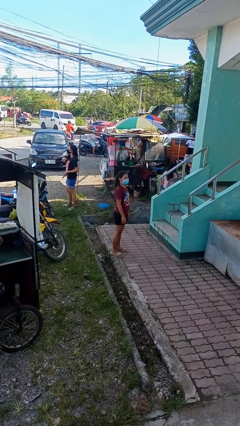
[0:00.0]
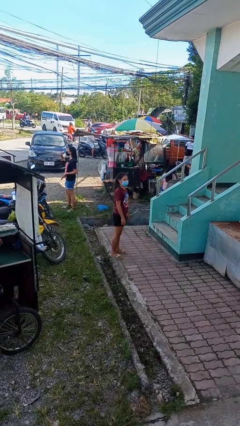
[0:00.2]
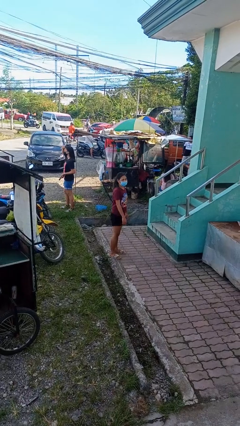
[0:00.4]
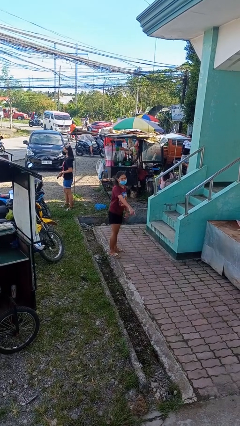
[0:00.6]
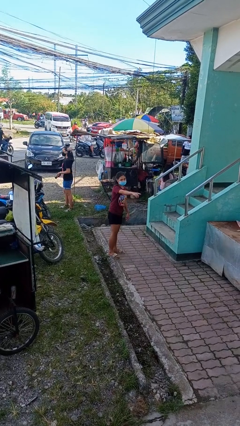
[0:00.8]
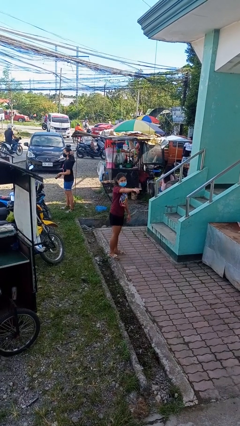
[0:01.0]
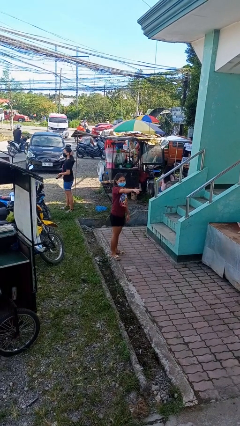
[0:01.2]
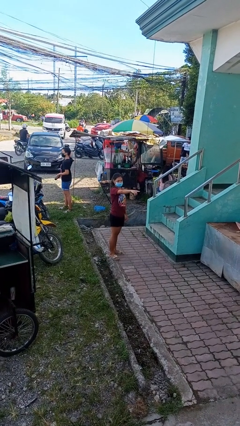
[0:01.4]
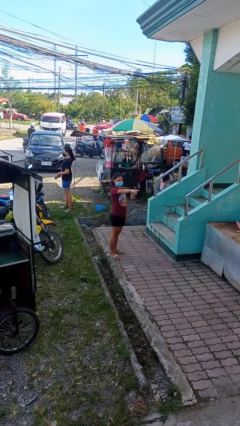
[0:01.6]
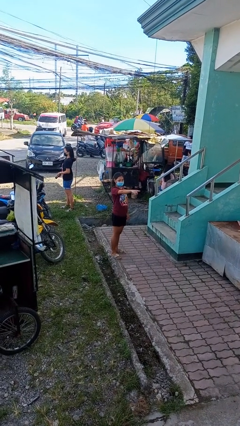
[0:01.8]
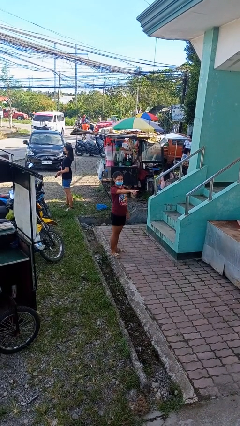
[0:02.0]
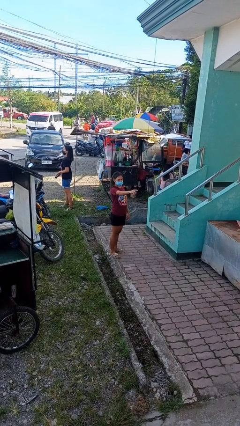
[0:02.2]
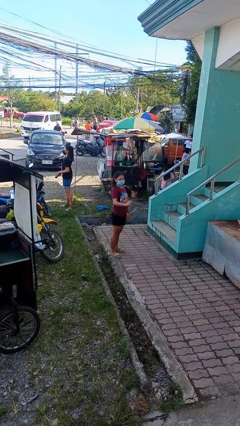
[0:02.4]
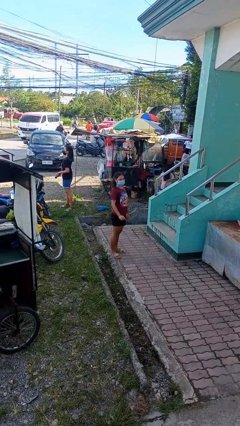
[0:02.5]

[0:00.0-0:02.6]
person points at person

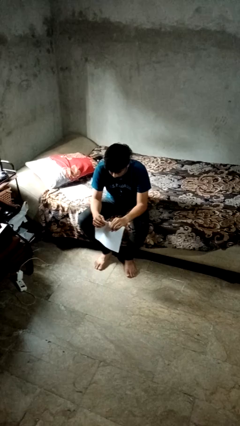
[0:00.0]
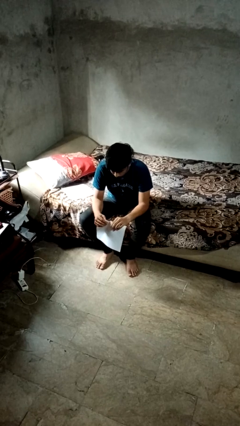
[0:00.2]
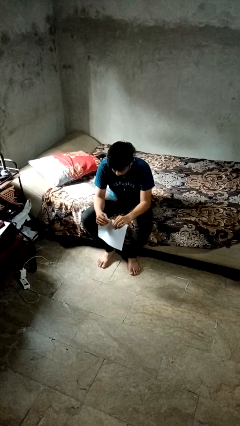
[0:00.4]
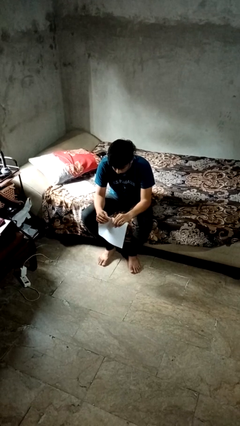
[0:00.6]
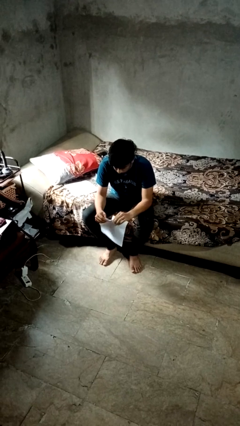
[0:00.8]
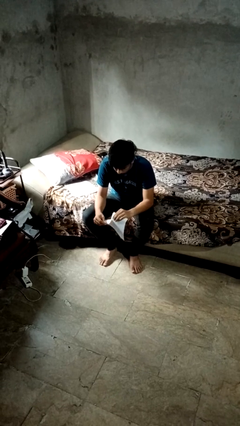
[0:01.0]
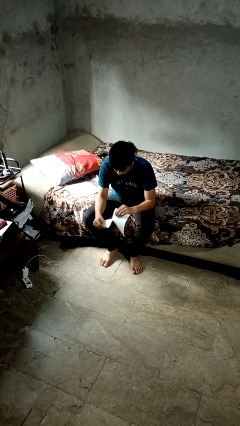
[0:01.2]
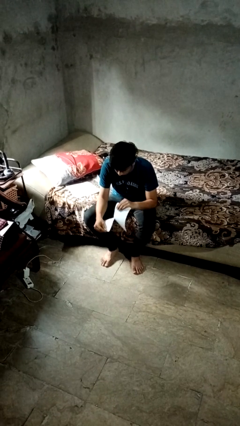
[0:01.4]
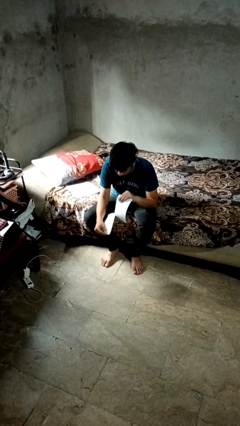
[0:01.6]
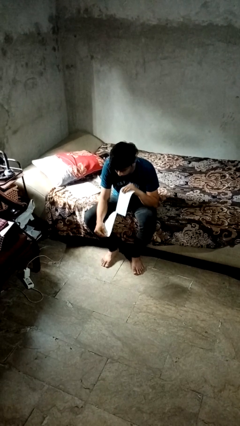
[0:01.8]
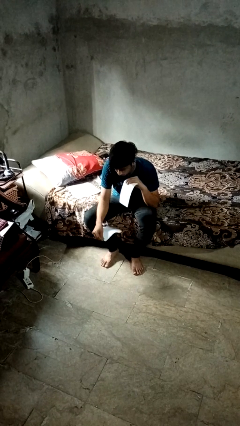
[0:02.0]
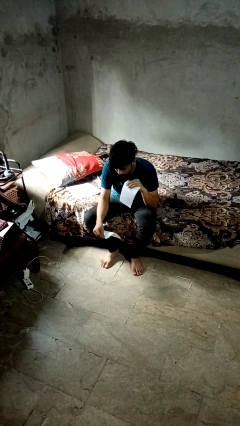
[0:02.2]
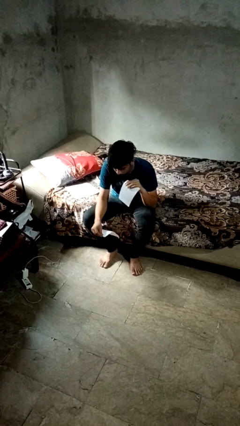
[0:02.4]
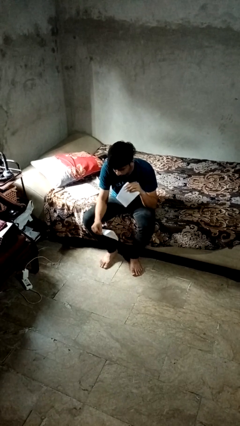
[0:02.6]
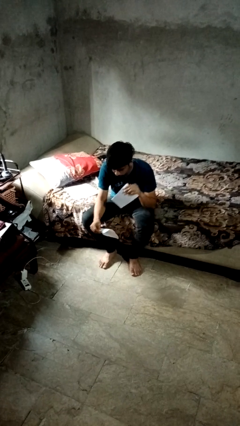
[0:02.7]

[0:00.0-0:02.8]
person tears paper

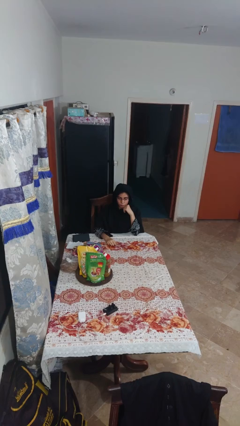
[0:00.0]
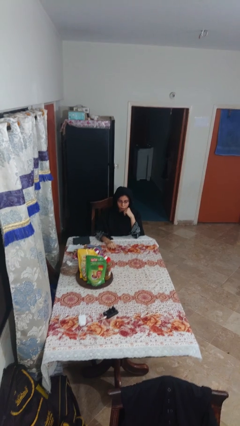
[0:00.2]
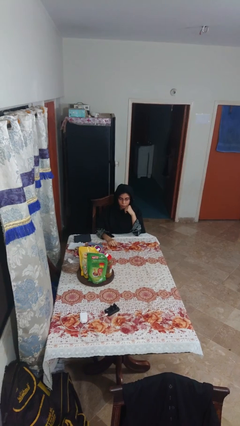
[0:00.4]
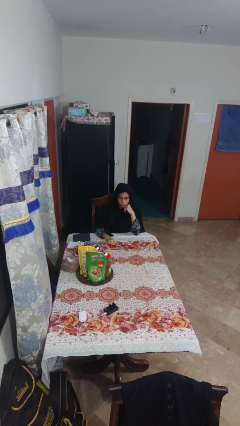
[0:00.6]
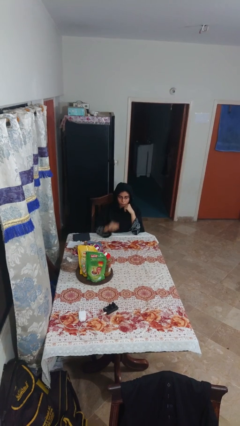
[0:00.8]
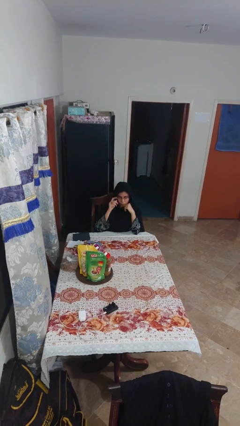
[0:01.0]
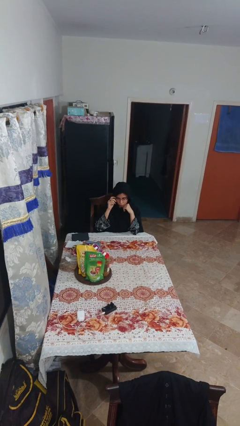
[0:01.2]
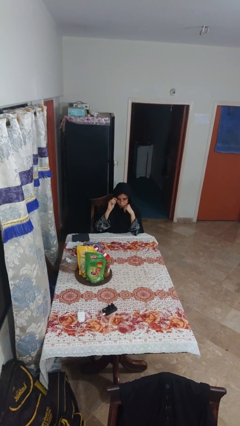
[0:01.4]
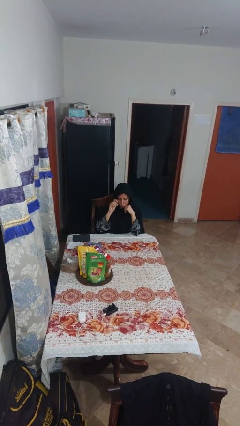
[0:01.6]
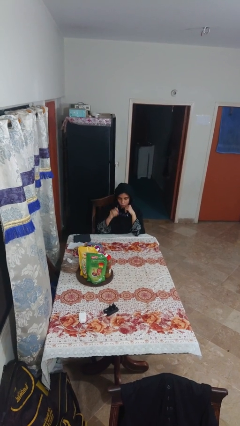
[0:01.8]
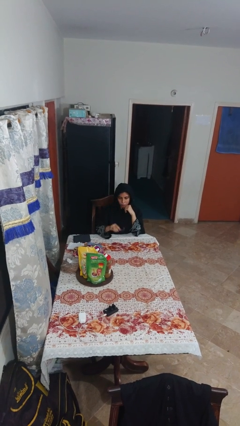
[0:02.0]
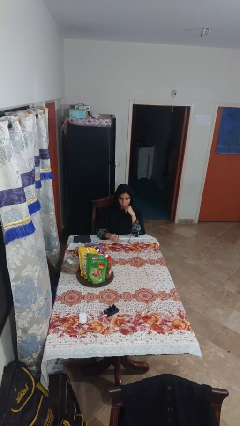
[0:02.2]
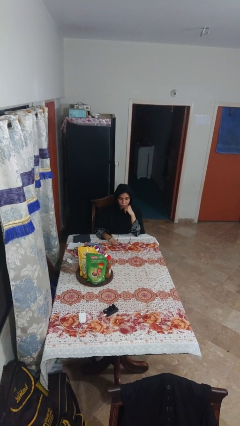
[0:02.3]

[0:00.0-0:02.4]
person takes off glasses

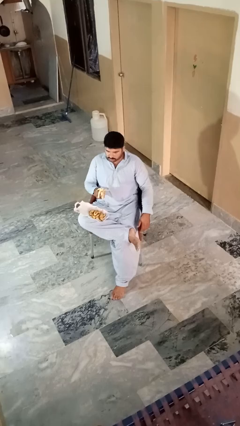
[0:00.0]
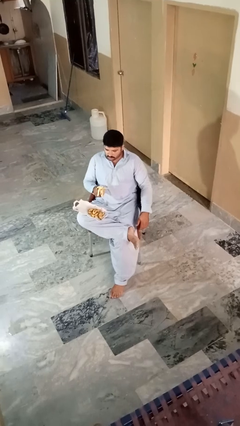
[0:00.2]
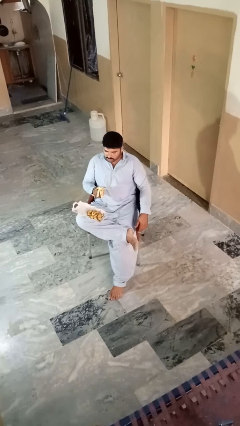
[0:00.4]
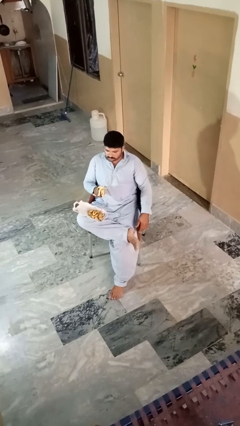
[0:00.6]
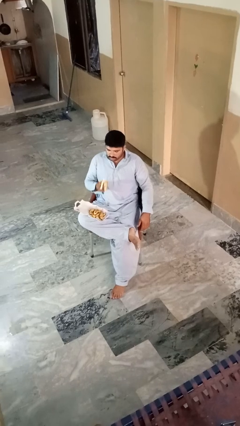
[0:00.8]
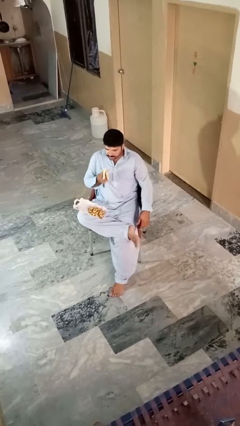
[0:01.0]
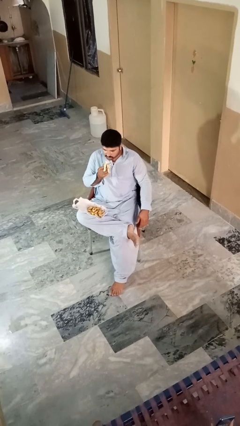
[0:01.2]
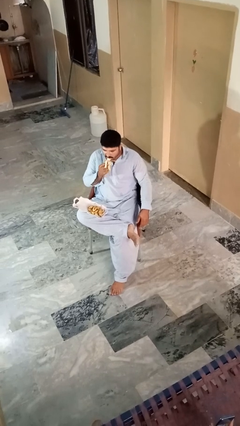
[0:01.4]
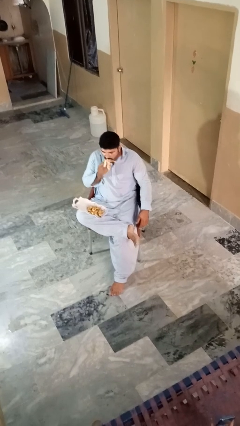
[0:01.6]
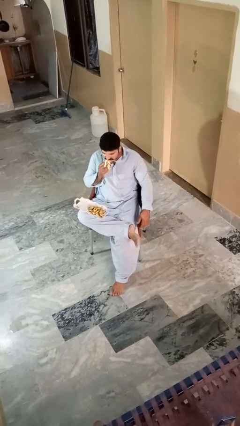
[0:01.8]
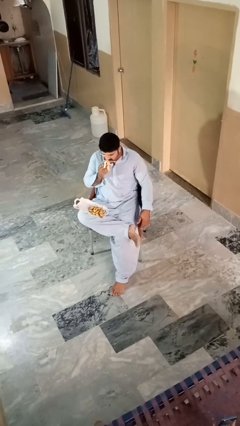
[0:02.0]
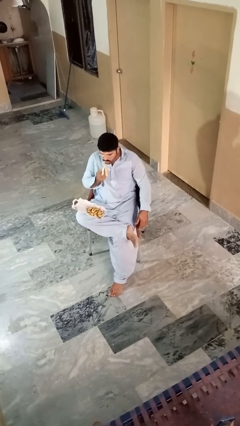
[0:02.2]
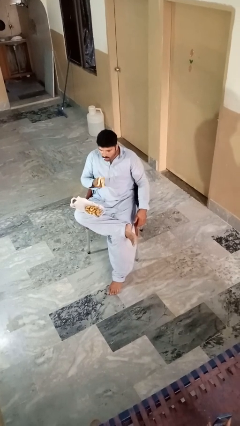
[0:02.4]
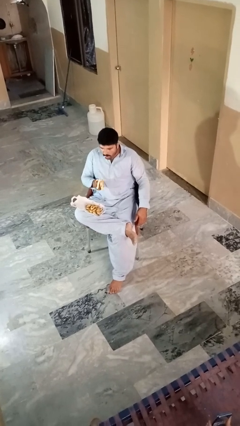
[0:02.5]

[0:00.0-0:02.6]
person eats banana

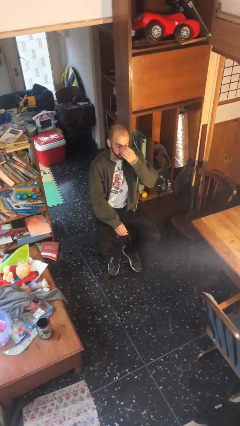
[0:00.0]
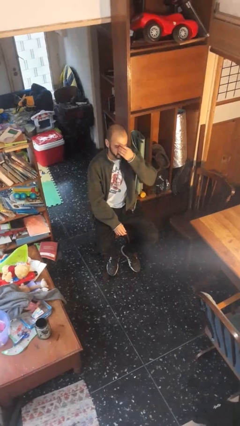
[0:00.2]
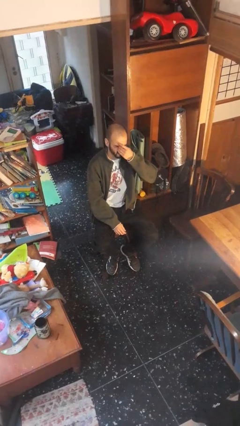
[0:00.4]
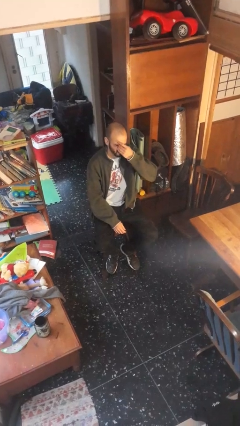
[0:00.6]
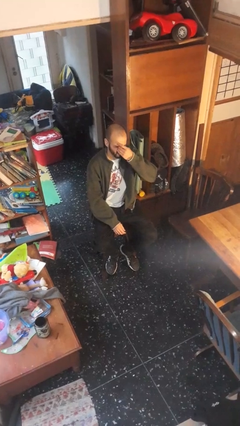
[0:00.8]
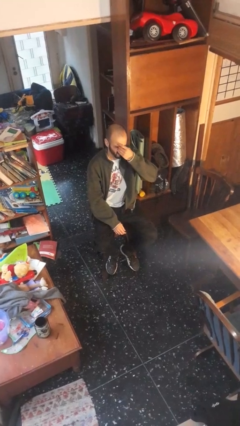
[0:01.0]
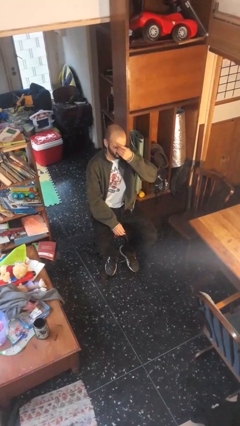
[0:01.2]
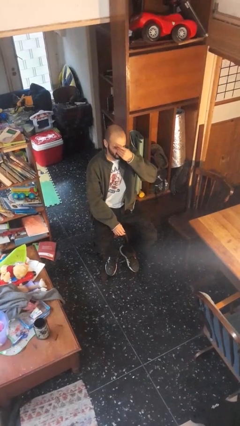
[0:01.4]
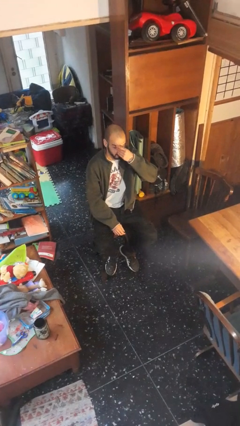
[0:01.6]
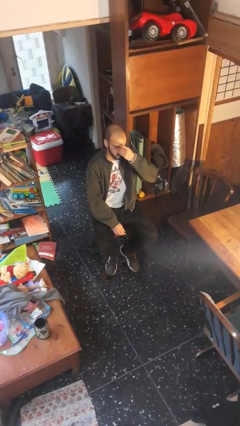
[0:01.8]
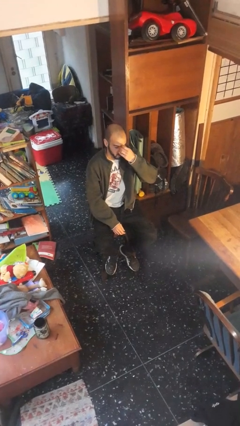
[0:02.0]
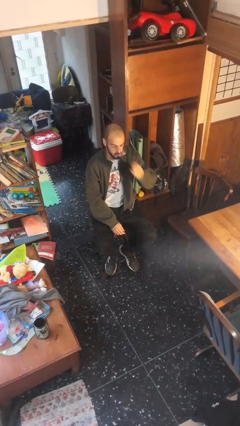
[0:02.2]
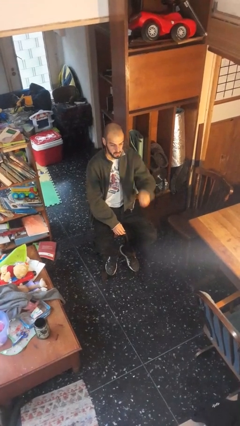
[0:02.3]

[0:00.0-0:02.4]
person rubs eyes

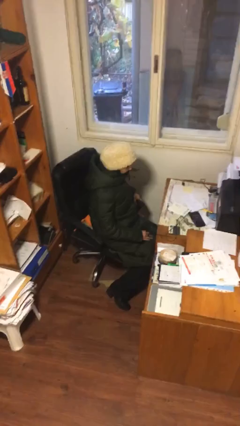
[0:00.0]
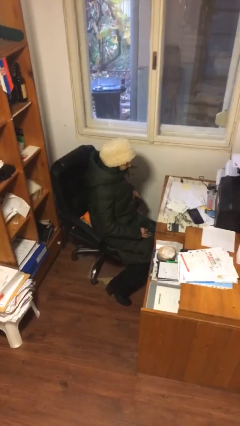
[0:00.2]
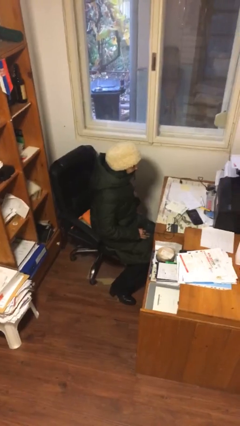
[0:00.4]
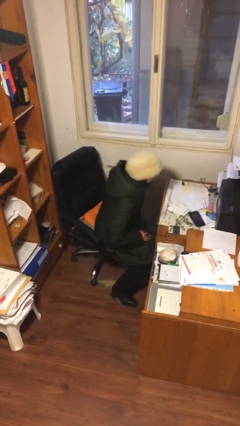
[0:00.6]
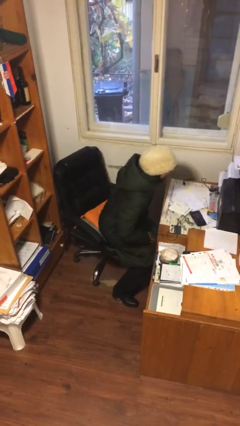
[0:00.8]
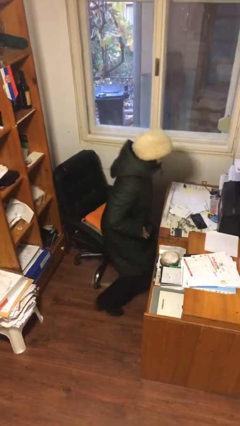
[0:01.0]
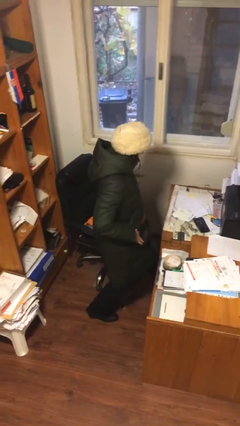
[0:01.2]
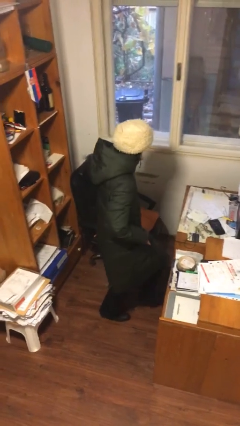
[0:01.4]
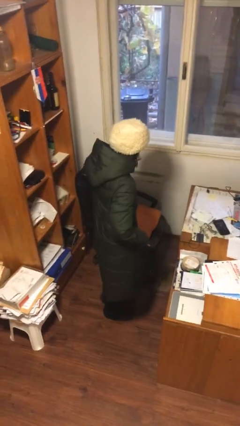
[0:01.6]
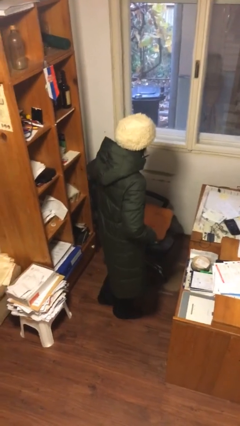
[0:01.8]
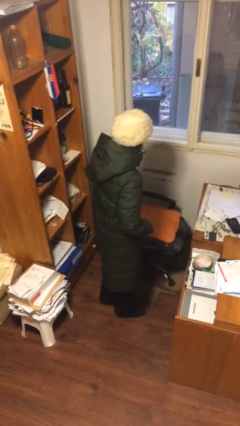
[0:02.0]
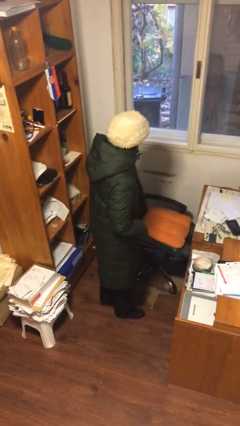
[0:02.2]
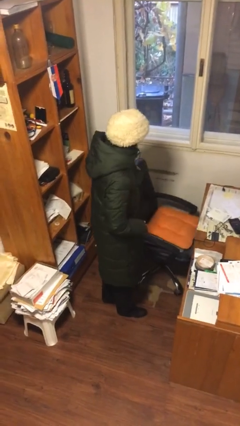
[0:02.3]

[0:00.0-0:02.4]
person stands up

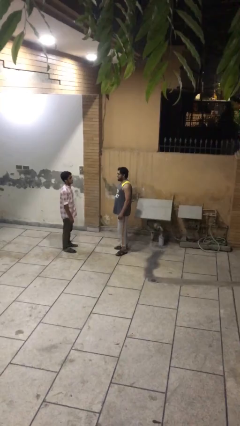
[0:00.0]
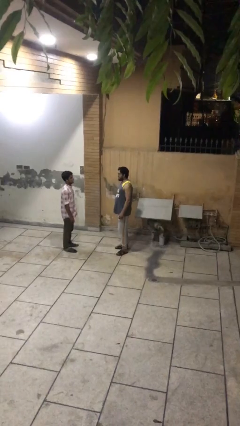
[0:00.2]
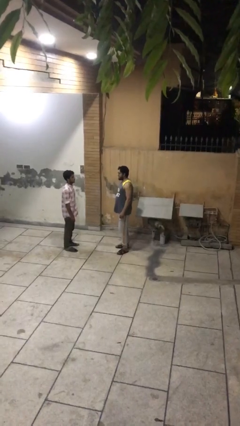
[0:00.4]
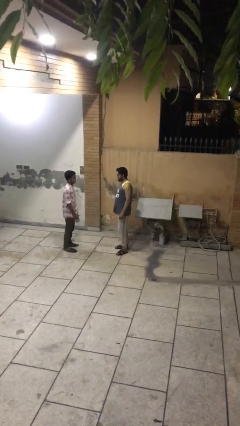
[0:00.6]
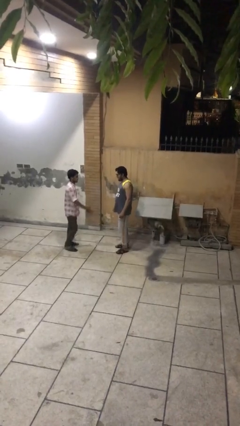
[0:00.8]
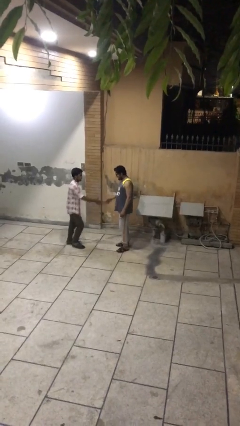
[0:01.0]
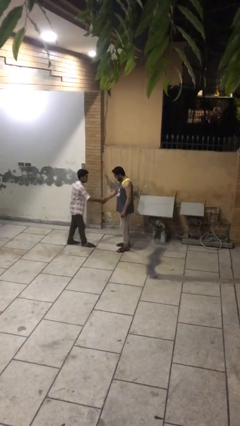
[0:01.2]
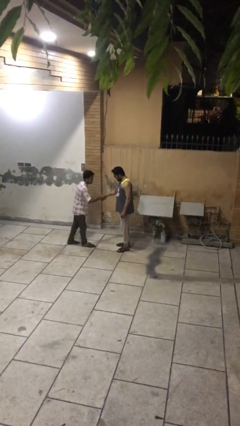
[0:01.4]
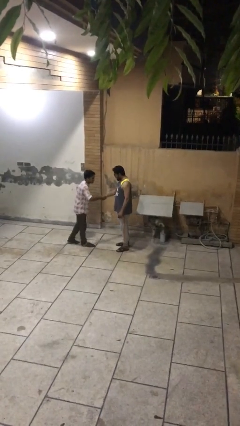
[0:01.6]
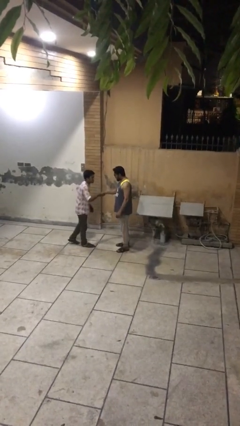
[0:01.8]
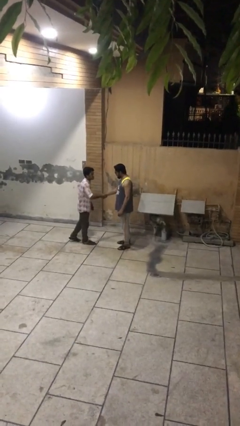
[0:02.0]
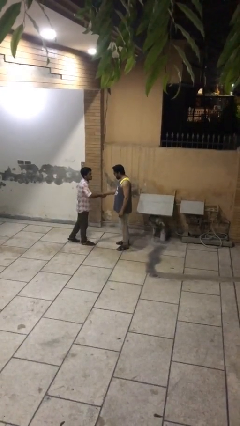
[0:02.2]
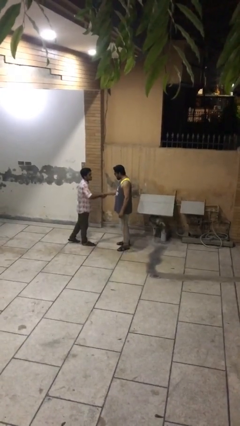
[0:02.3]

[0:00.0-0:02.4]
person shakes hand
